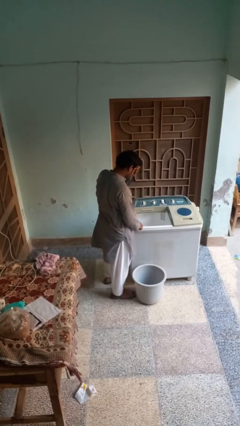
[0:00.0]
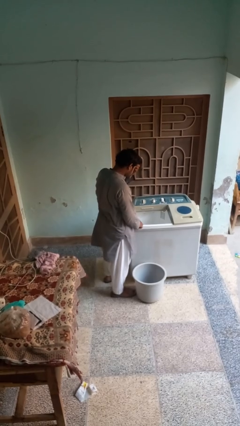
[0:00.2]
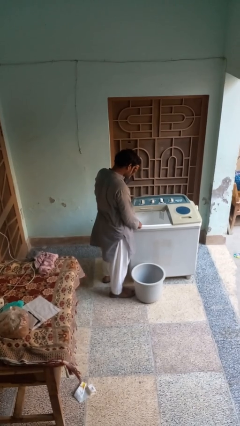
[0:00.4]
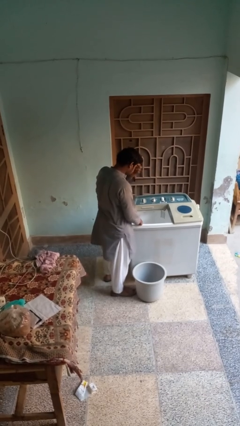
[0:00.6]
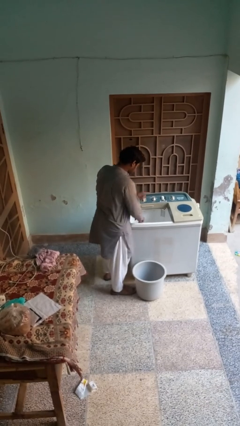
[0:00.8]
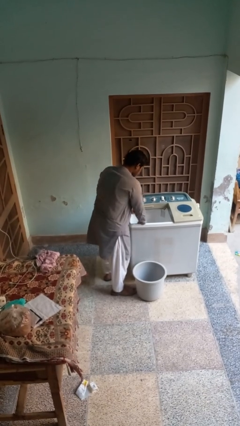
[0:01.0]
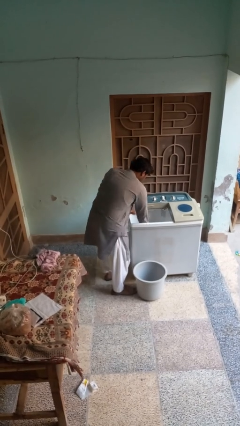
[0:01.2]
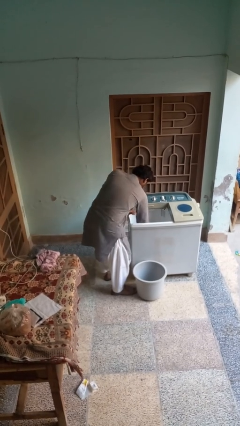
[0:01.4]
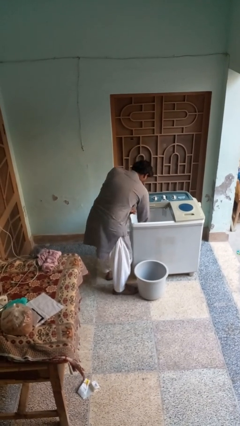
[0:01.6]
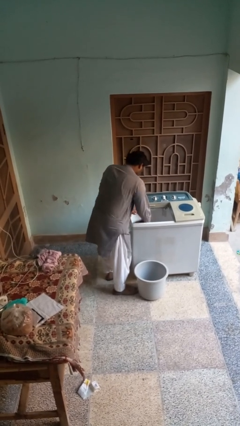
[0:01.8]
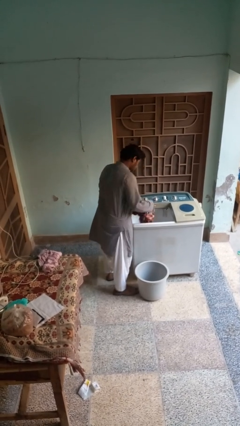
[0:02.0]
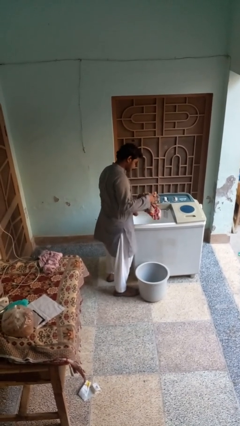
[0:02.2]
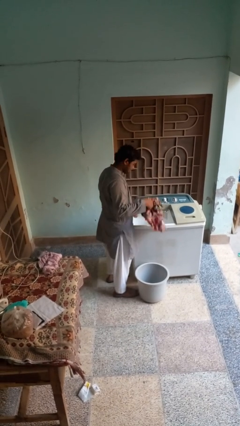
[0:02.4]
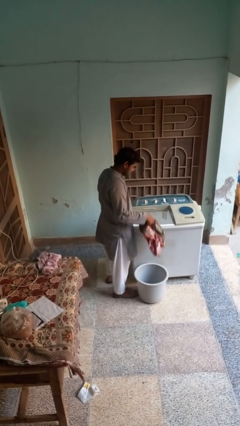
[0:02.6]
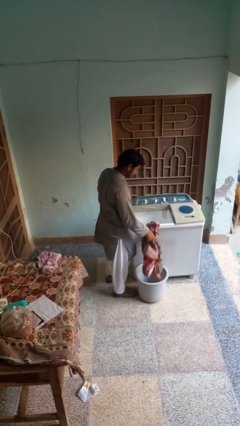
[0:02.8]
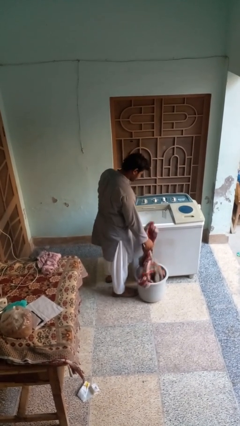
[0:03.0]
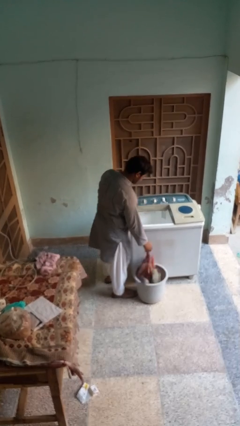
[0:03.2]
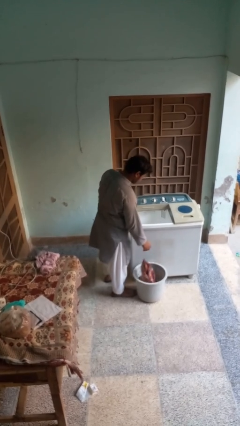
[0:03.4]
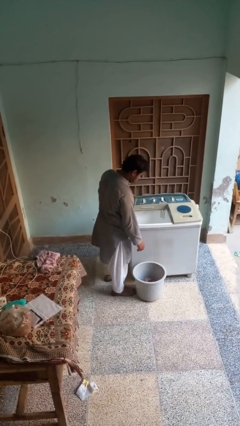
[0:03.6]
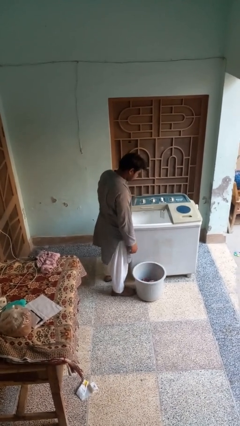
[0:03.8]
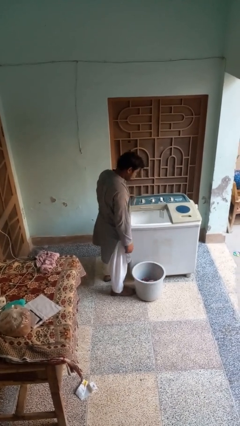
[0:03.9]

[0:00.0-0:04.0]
person unloads clotheswasher

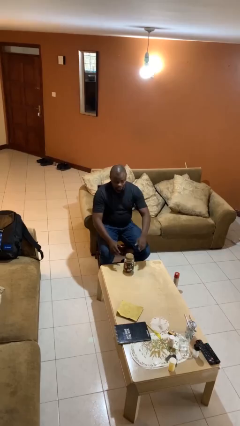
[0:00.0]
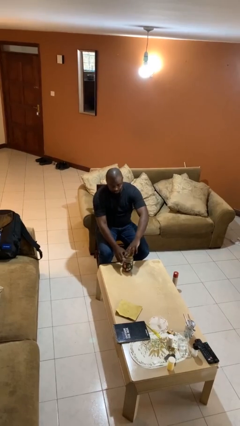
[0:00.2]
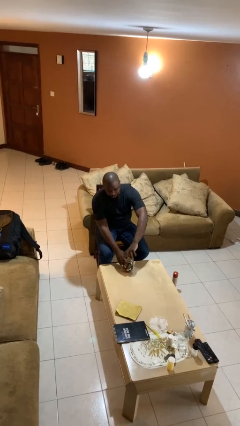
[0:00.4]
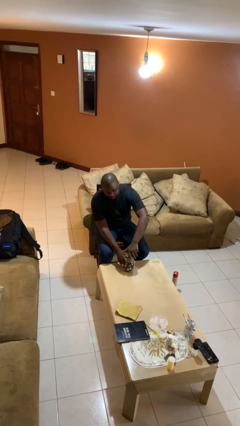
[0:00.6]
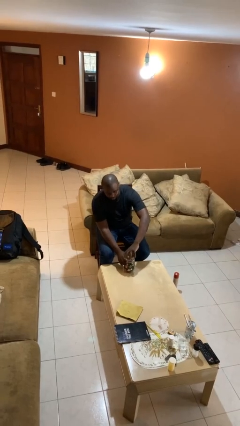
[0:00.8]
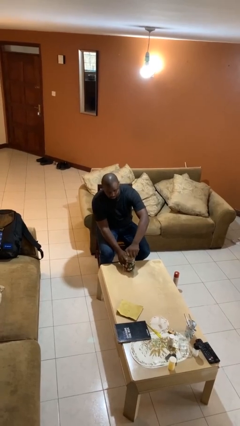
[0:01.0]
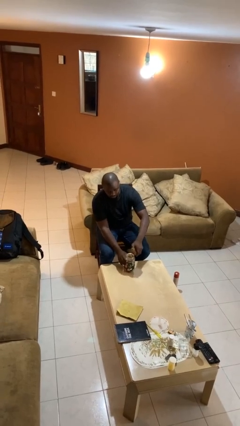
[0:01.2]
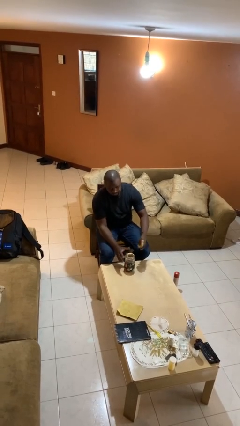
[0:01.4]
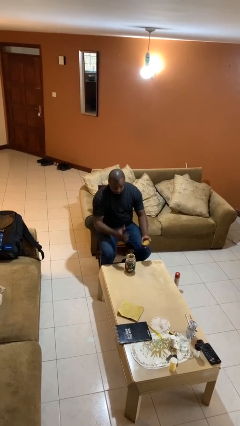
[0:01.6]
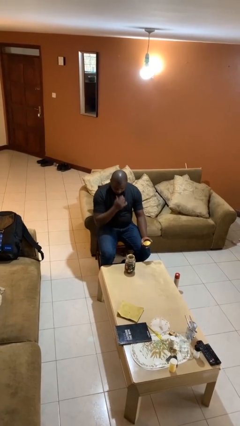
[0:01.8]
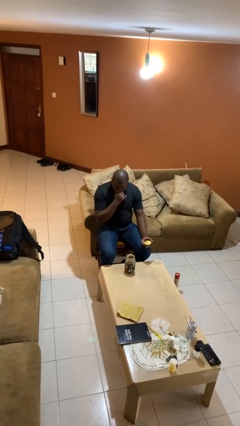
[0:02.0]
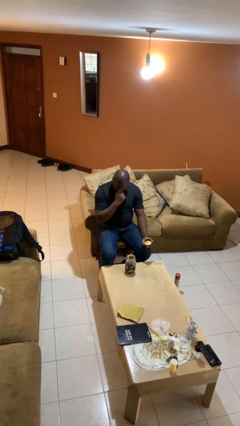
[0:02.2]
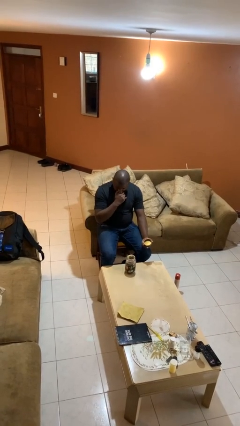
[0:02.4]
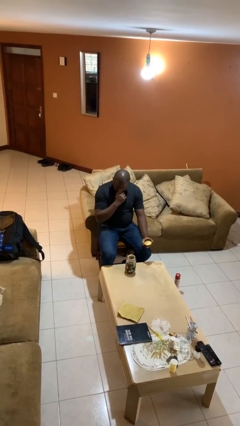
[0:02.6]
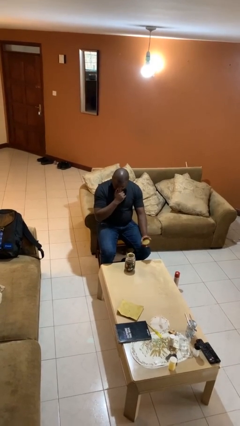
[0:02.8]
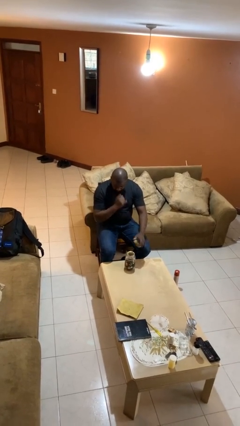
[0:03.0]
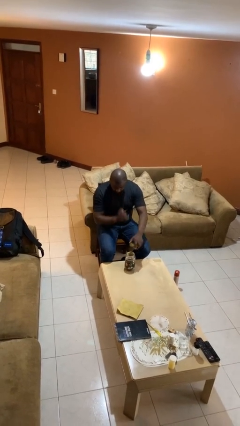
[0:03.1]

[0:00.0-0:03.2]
person opens jar

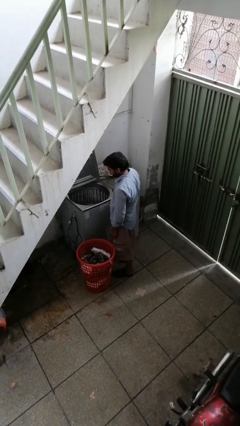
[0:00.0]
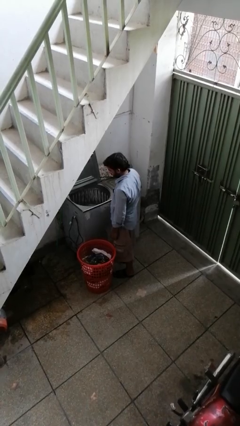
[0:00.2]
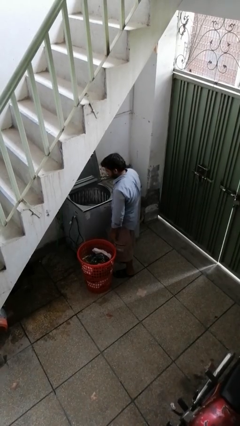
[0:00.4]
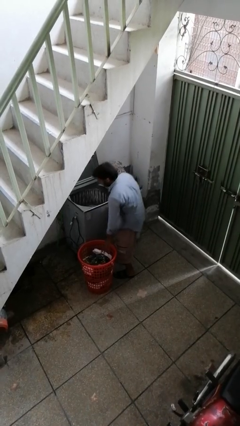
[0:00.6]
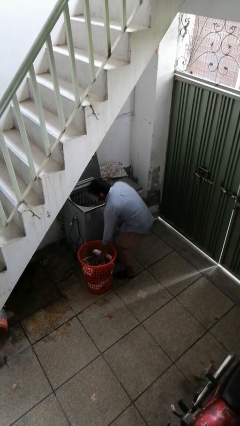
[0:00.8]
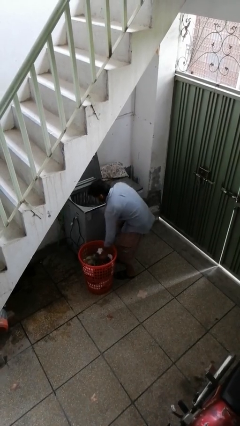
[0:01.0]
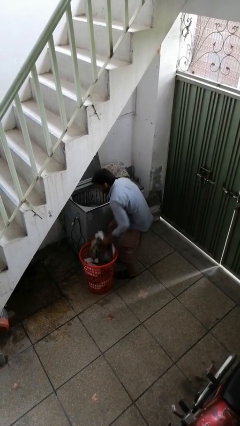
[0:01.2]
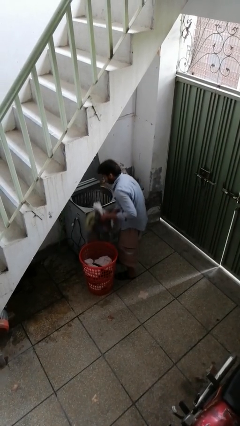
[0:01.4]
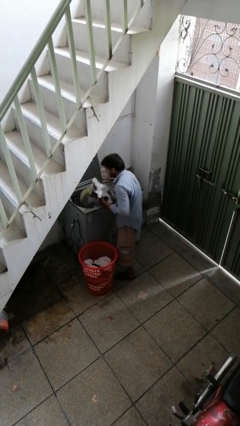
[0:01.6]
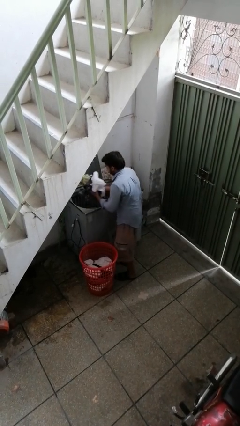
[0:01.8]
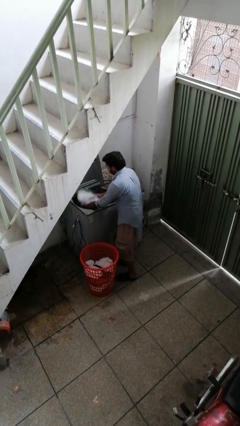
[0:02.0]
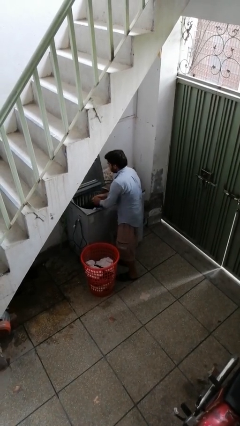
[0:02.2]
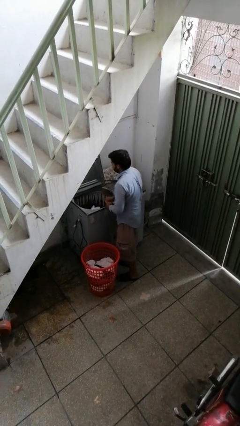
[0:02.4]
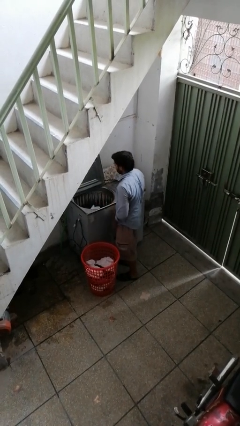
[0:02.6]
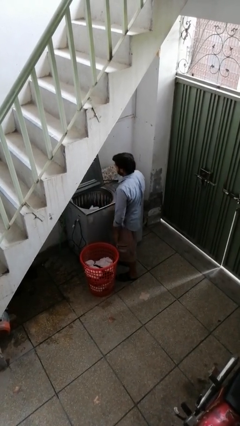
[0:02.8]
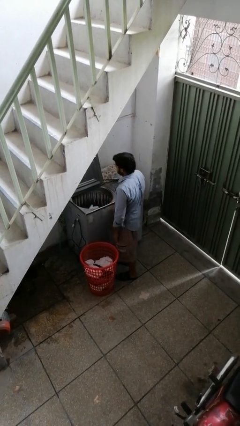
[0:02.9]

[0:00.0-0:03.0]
person loads clotheswasher

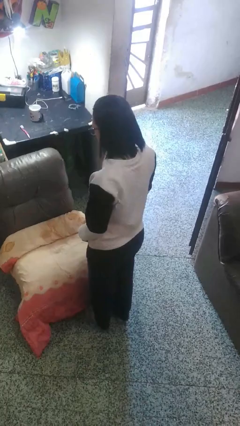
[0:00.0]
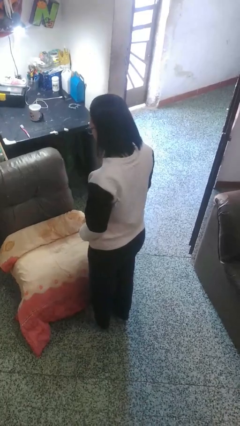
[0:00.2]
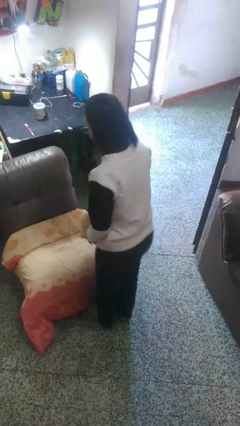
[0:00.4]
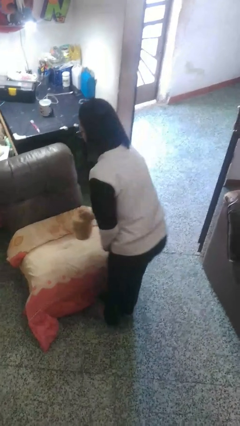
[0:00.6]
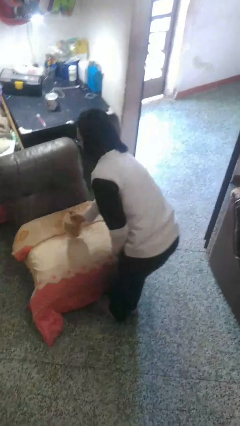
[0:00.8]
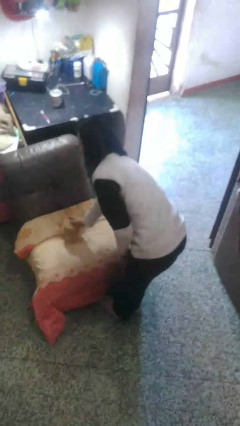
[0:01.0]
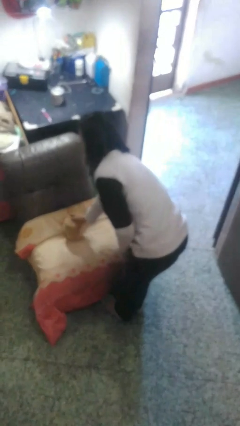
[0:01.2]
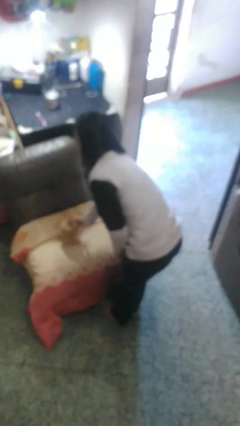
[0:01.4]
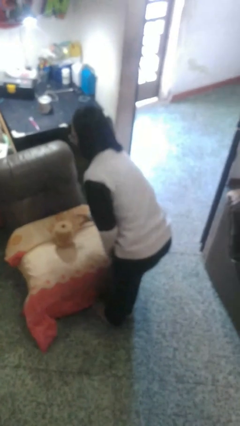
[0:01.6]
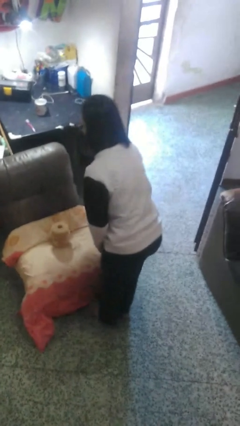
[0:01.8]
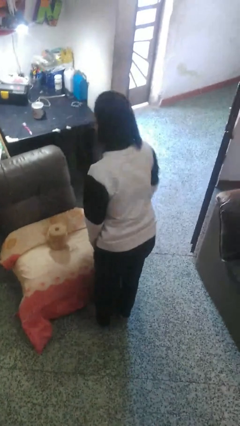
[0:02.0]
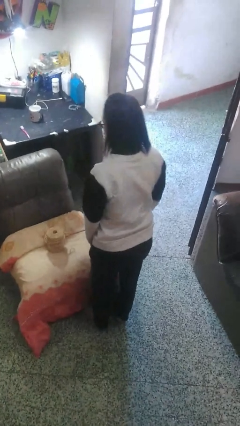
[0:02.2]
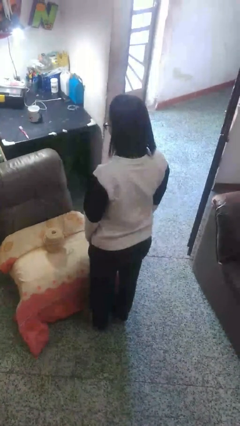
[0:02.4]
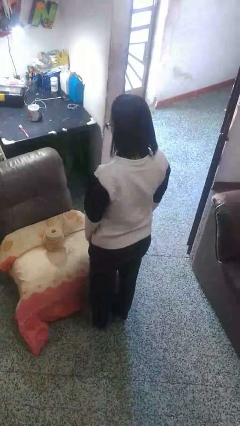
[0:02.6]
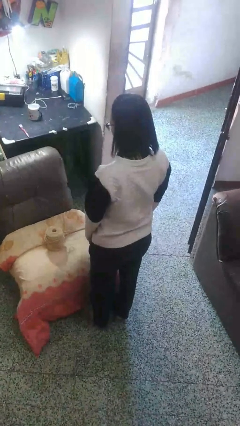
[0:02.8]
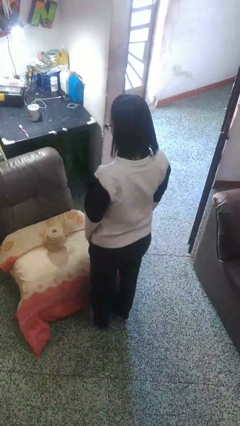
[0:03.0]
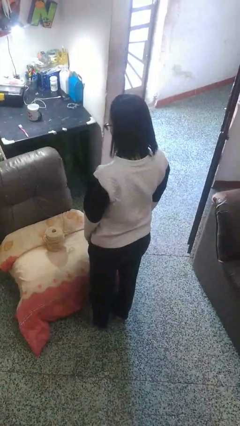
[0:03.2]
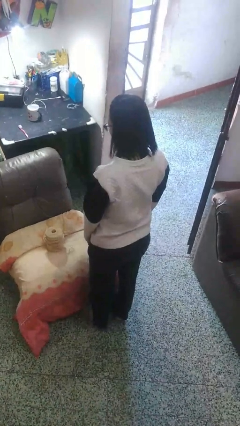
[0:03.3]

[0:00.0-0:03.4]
person puts down object on couch

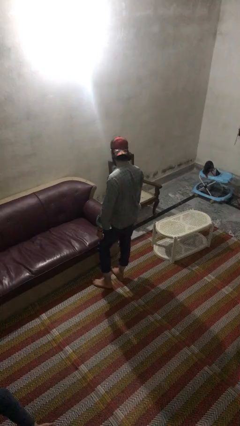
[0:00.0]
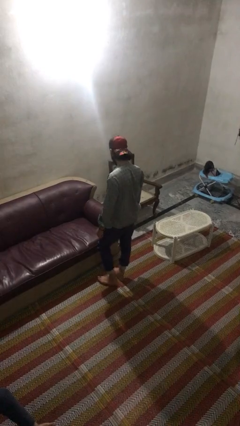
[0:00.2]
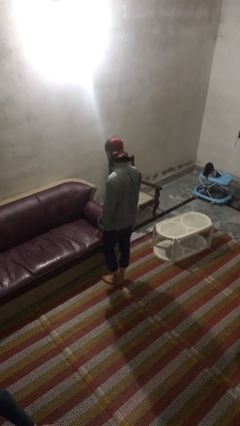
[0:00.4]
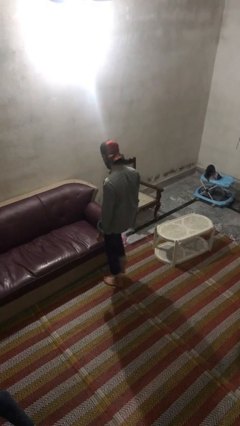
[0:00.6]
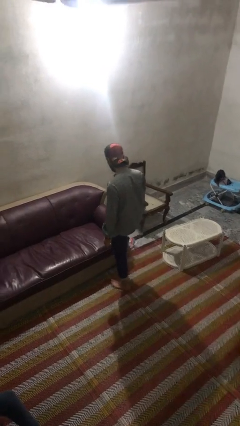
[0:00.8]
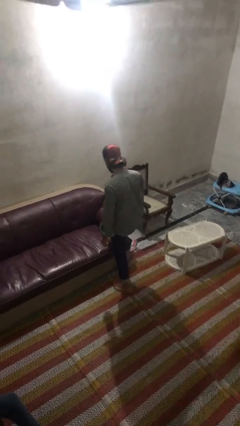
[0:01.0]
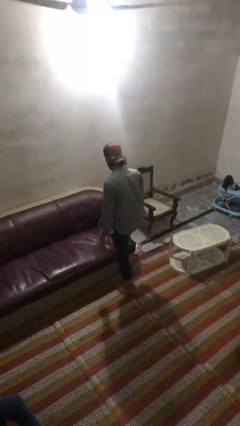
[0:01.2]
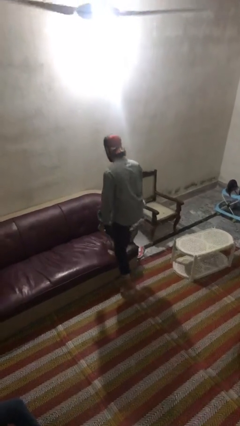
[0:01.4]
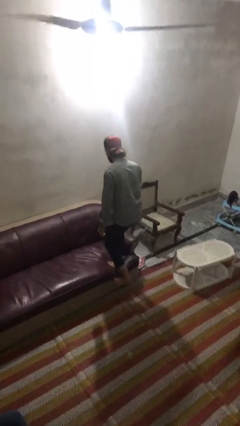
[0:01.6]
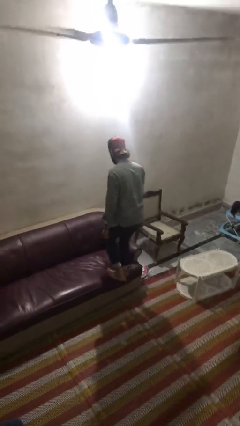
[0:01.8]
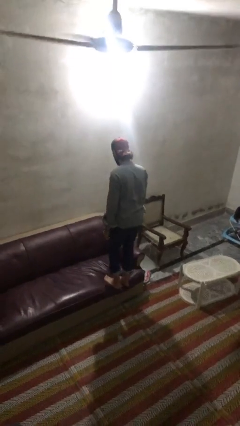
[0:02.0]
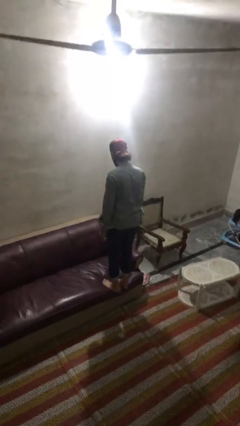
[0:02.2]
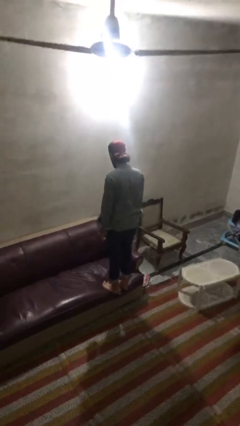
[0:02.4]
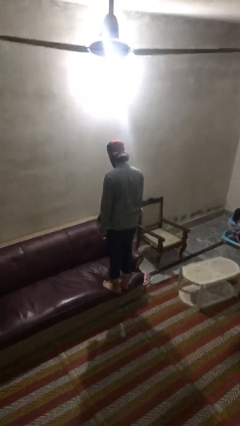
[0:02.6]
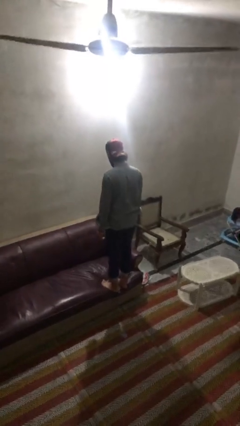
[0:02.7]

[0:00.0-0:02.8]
person climbs on couch

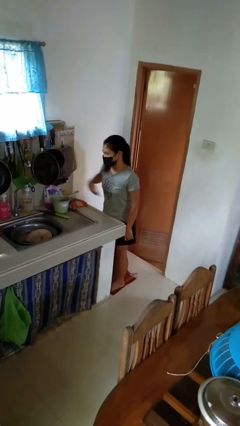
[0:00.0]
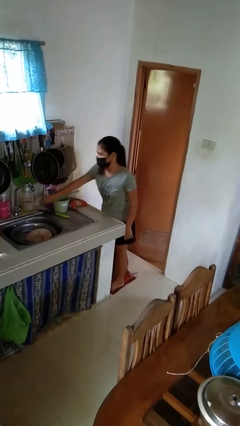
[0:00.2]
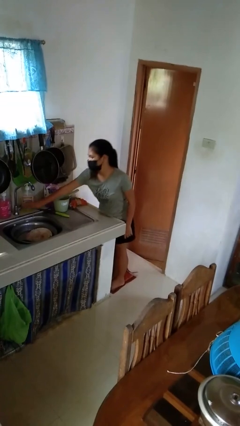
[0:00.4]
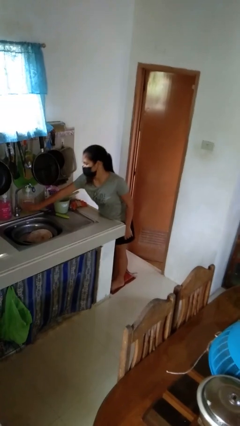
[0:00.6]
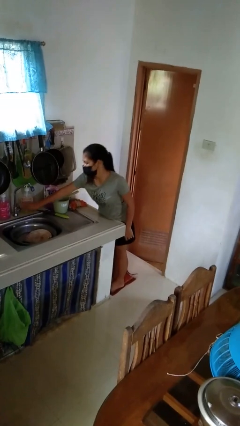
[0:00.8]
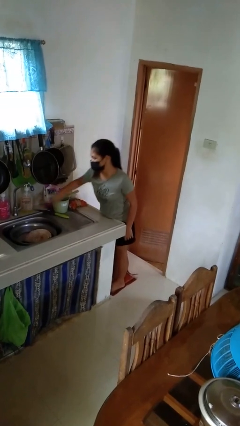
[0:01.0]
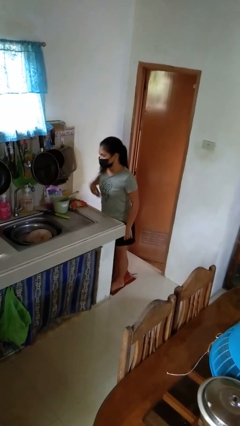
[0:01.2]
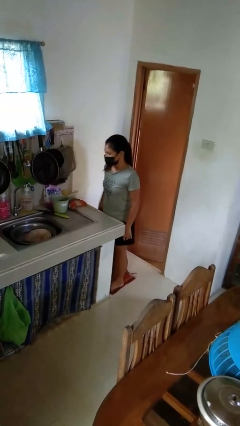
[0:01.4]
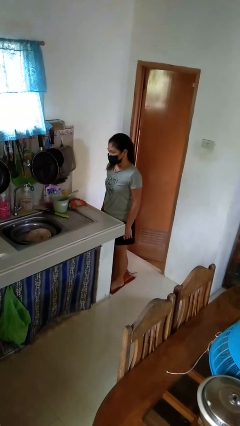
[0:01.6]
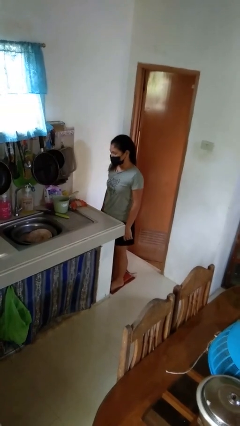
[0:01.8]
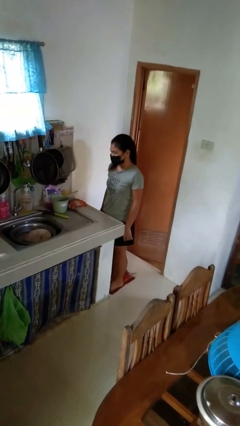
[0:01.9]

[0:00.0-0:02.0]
person turns off faucet
